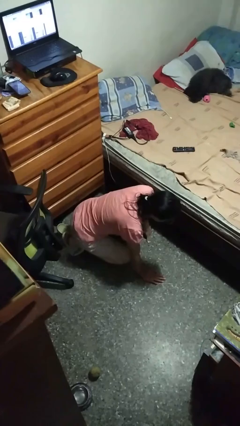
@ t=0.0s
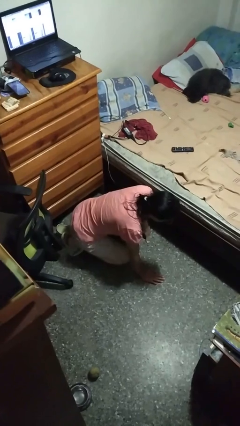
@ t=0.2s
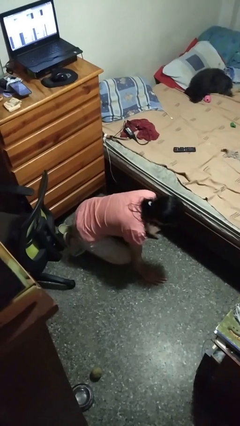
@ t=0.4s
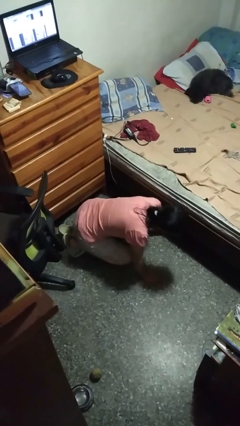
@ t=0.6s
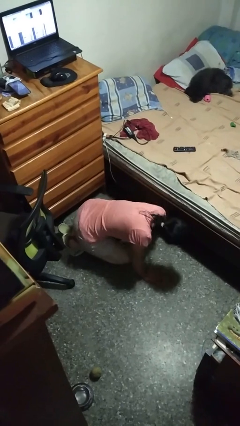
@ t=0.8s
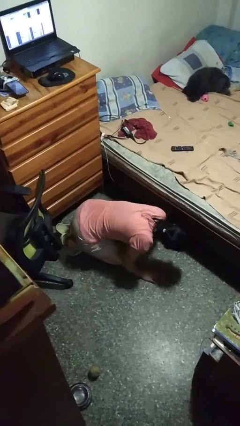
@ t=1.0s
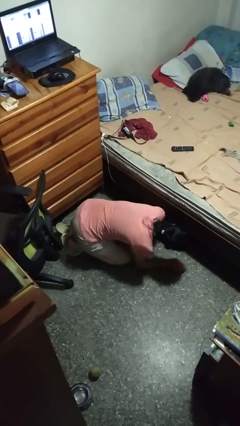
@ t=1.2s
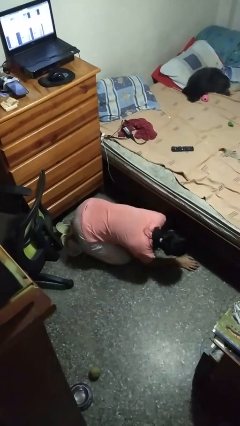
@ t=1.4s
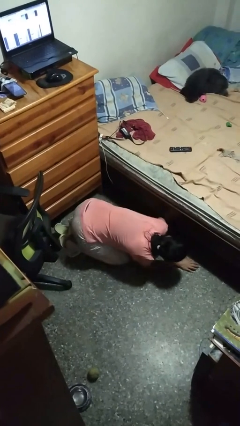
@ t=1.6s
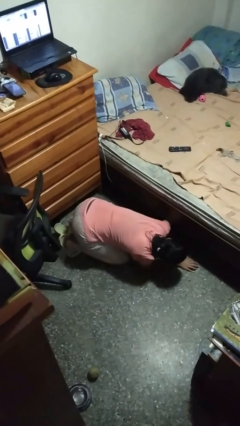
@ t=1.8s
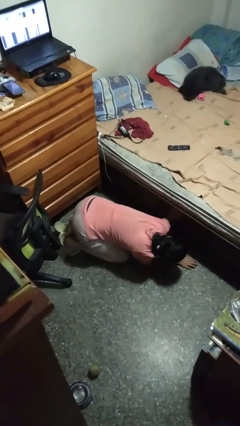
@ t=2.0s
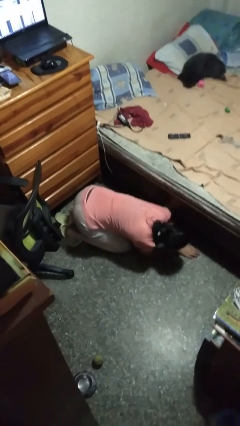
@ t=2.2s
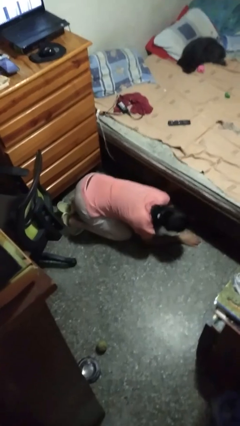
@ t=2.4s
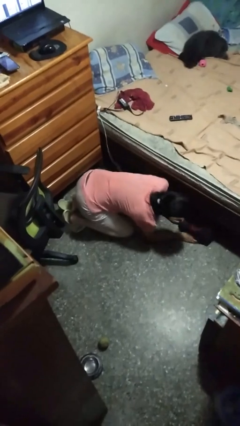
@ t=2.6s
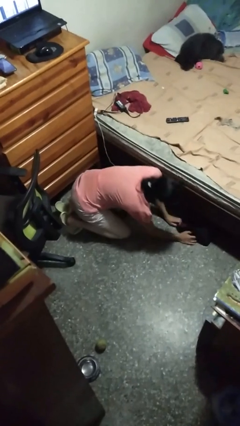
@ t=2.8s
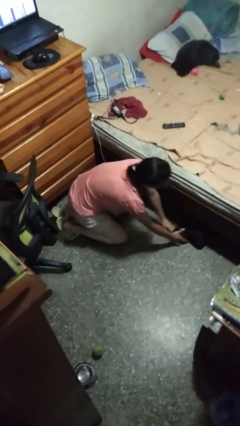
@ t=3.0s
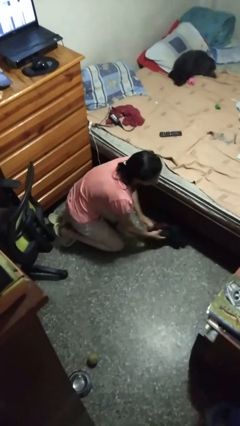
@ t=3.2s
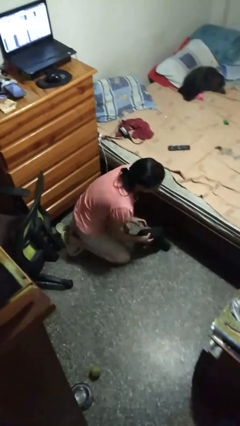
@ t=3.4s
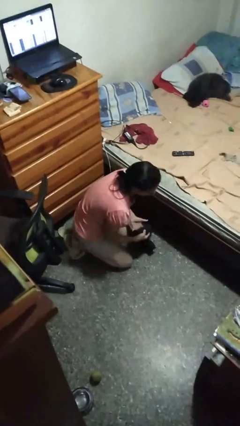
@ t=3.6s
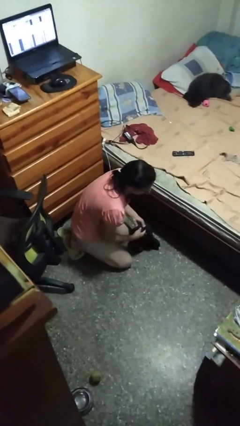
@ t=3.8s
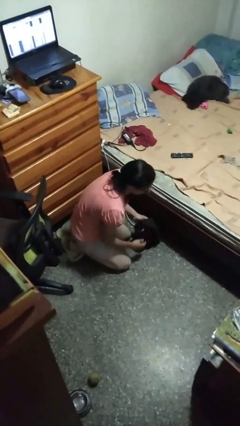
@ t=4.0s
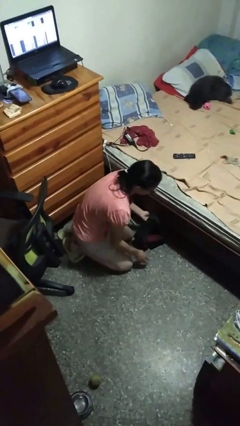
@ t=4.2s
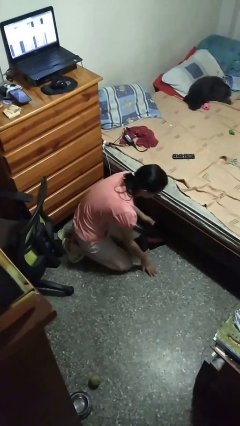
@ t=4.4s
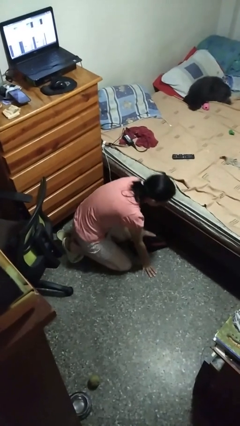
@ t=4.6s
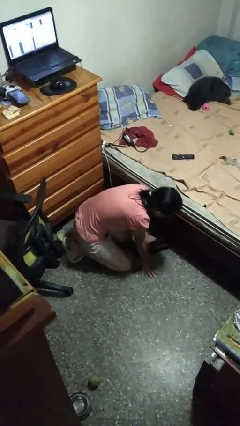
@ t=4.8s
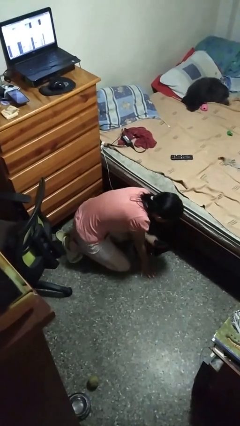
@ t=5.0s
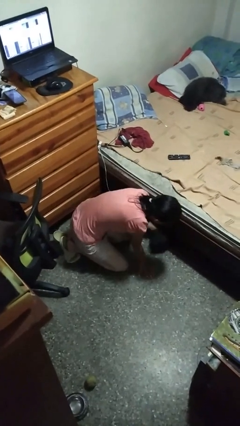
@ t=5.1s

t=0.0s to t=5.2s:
person searches under bed

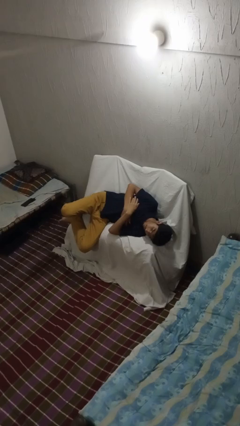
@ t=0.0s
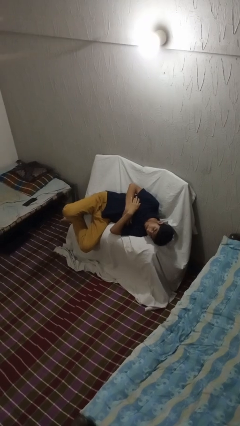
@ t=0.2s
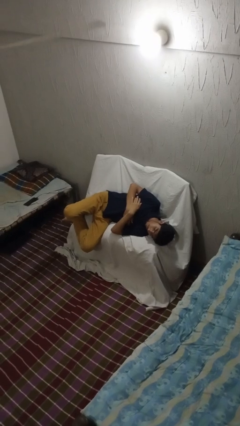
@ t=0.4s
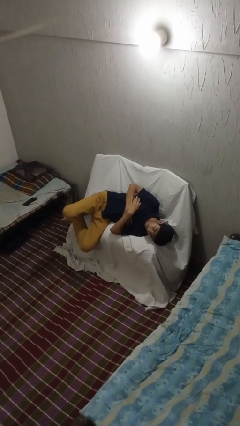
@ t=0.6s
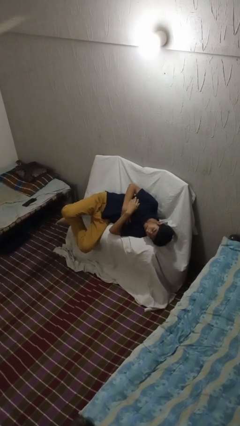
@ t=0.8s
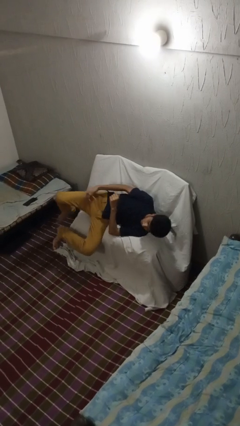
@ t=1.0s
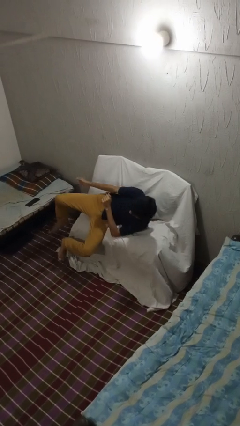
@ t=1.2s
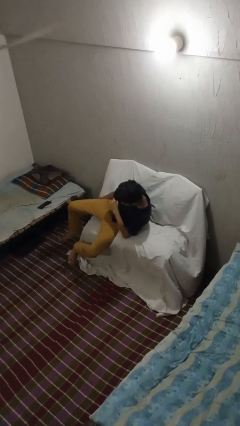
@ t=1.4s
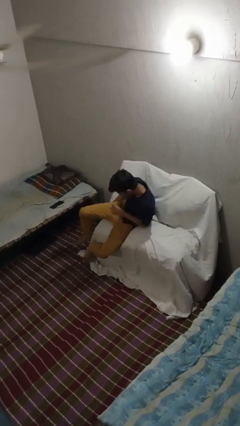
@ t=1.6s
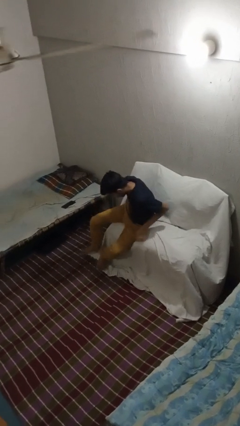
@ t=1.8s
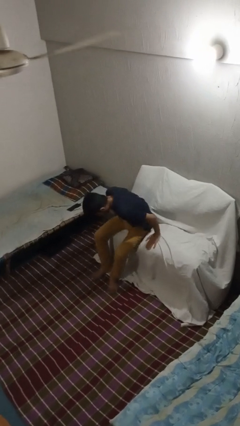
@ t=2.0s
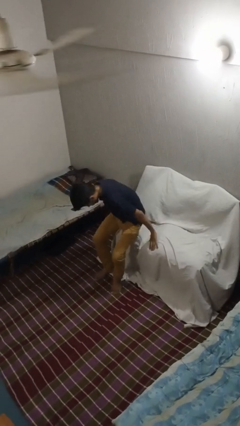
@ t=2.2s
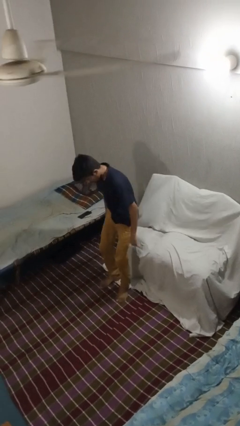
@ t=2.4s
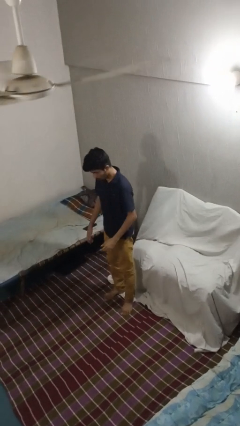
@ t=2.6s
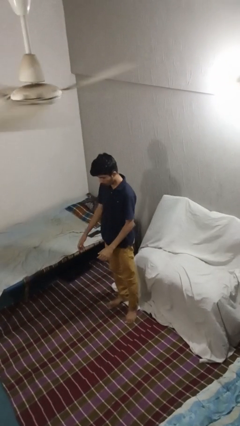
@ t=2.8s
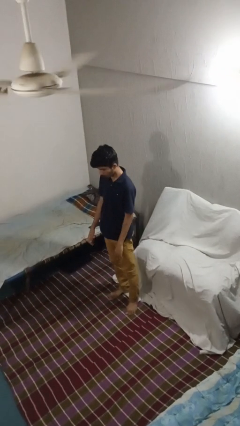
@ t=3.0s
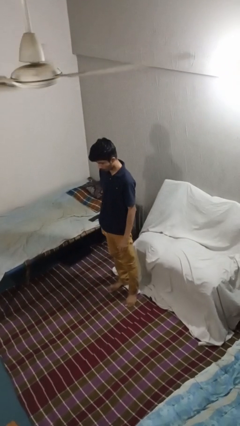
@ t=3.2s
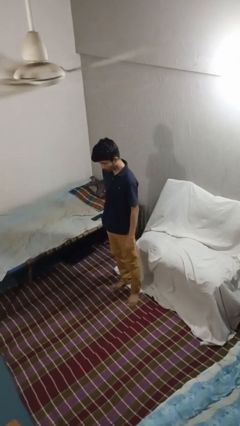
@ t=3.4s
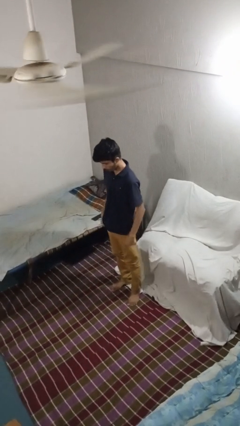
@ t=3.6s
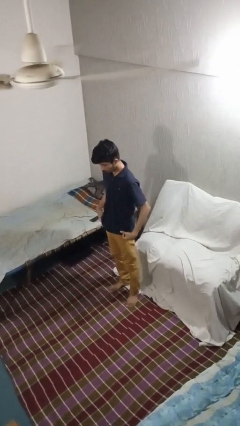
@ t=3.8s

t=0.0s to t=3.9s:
person stands up

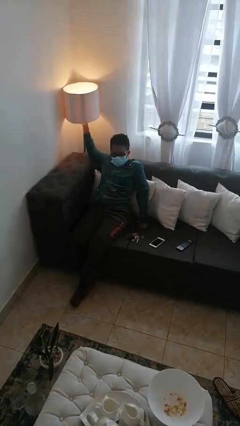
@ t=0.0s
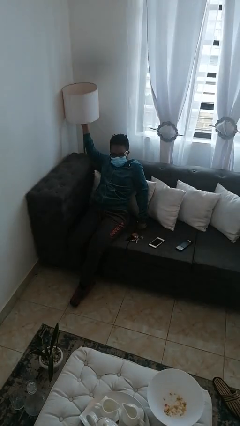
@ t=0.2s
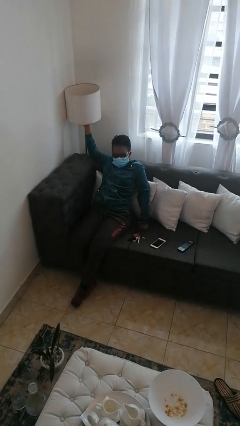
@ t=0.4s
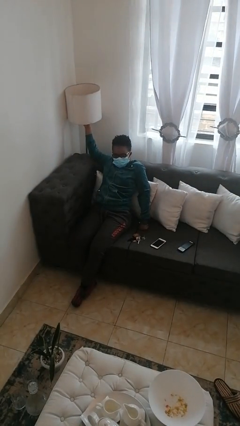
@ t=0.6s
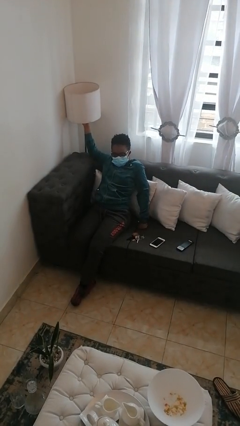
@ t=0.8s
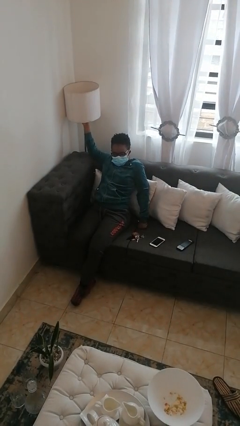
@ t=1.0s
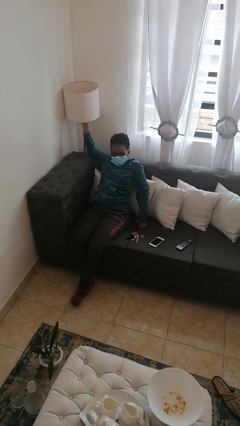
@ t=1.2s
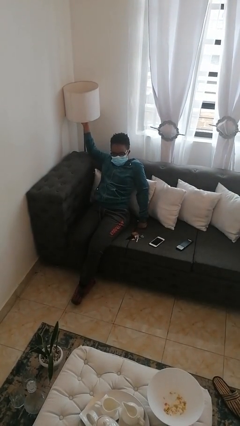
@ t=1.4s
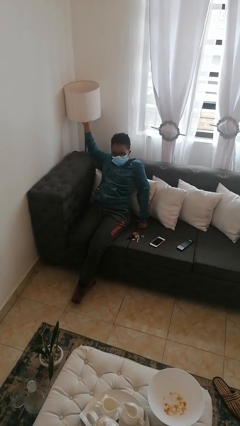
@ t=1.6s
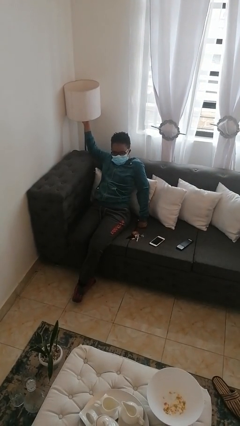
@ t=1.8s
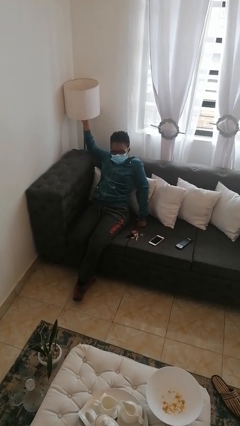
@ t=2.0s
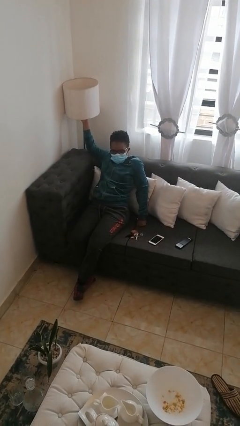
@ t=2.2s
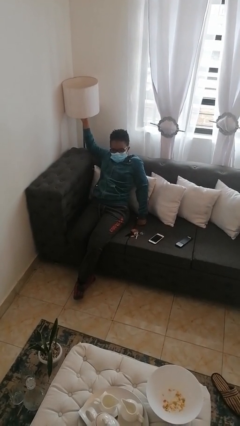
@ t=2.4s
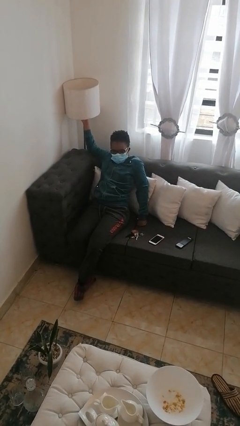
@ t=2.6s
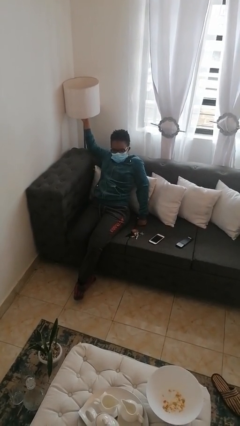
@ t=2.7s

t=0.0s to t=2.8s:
person turns off lamp

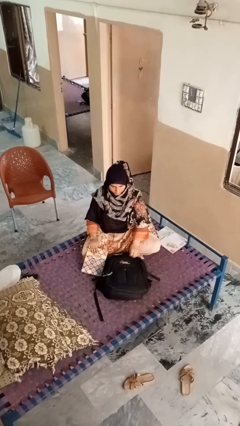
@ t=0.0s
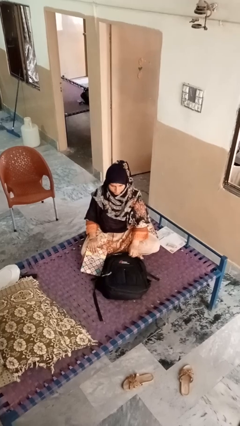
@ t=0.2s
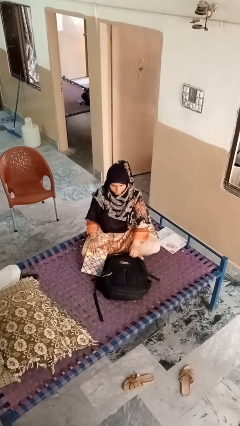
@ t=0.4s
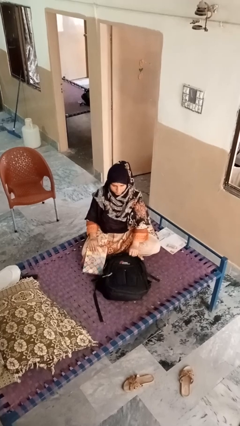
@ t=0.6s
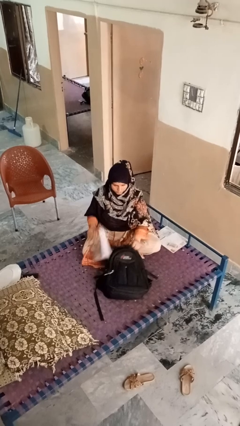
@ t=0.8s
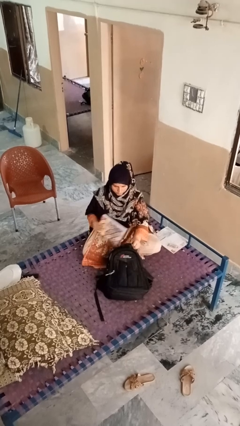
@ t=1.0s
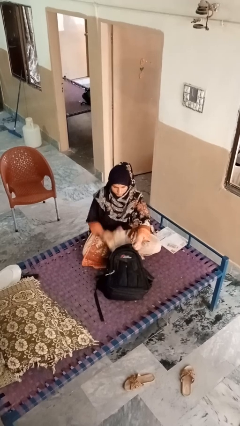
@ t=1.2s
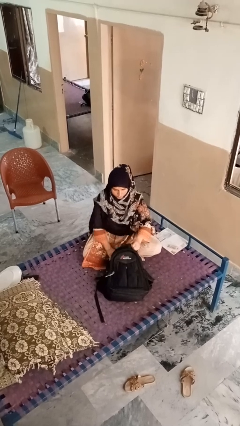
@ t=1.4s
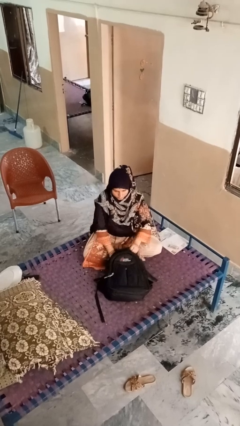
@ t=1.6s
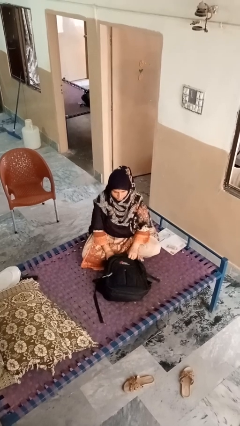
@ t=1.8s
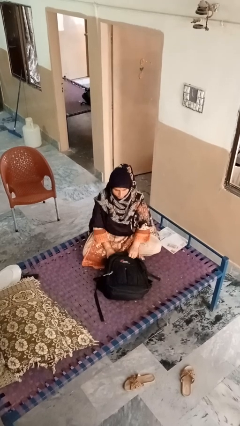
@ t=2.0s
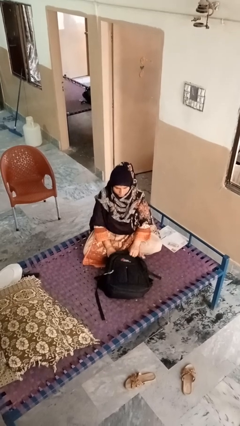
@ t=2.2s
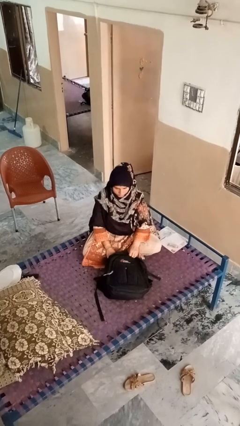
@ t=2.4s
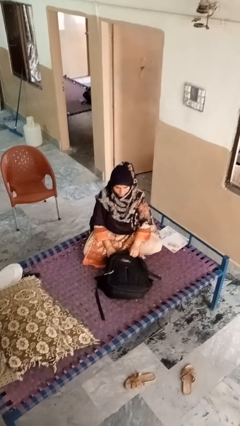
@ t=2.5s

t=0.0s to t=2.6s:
person puts object into bag

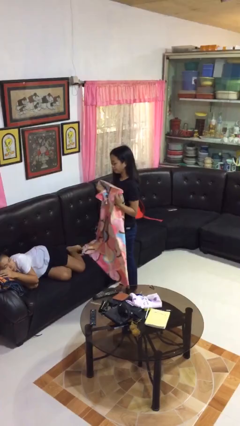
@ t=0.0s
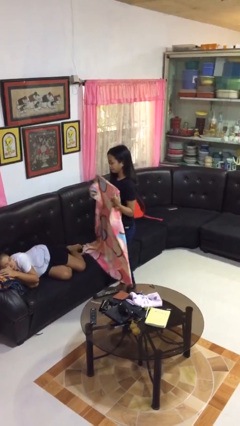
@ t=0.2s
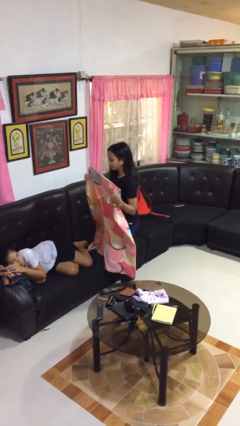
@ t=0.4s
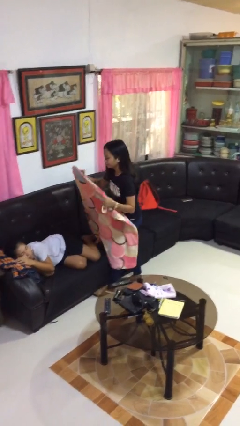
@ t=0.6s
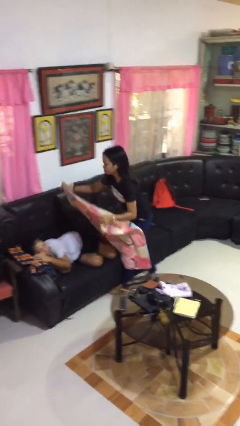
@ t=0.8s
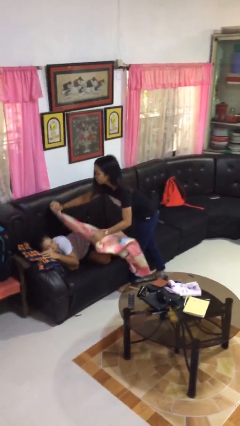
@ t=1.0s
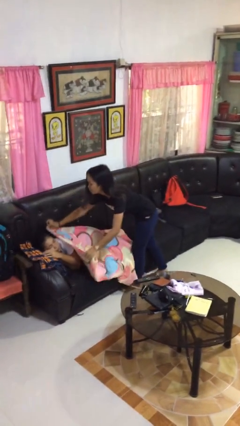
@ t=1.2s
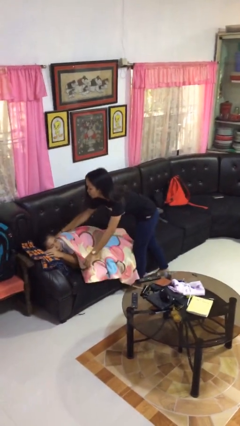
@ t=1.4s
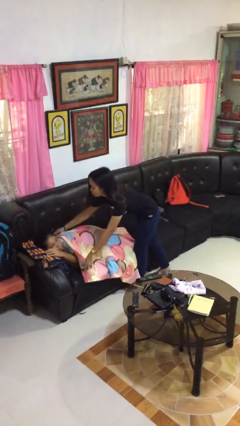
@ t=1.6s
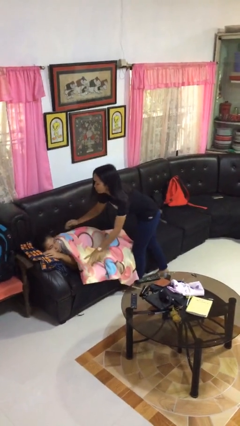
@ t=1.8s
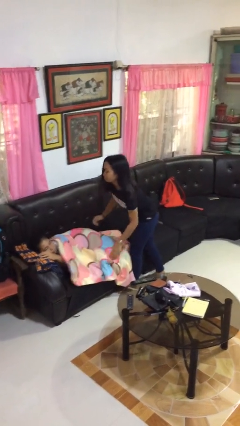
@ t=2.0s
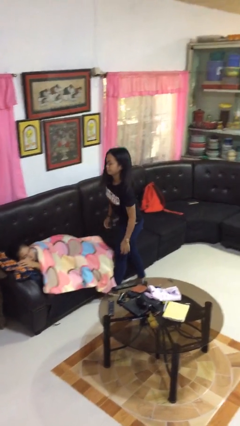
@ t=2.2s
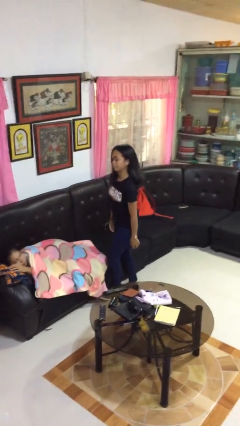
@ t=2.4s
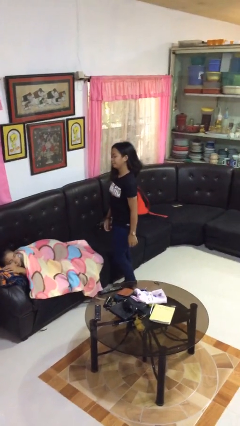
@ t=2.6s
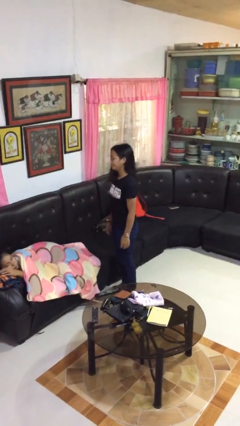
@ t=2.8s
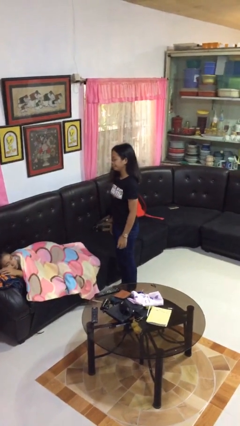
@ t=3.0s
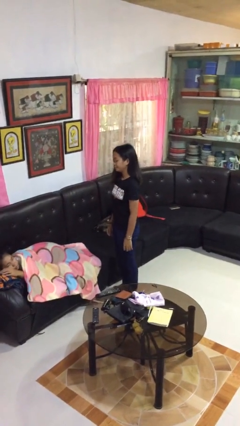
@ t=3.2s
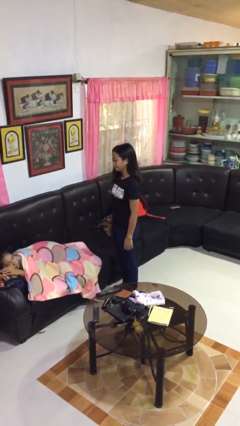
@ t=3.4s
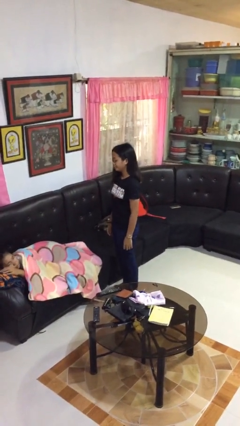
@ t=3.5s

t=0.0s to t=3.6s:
person covers friend with blanket
